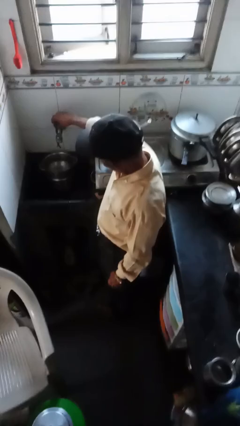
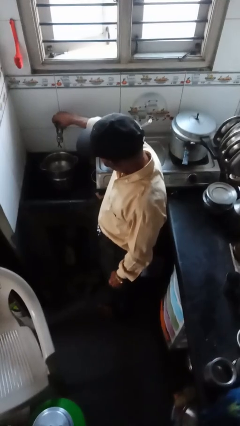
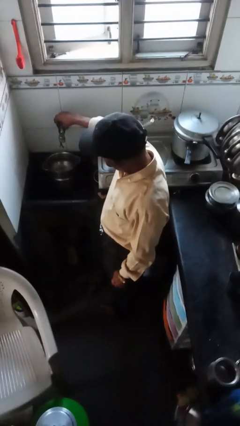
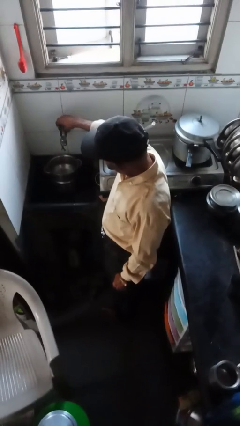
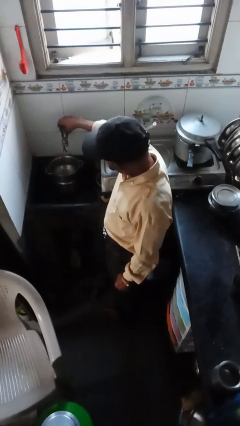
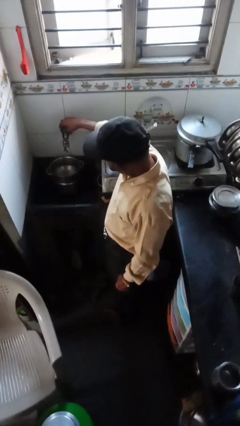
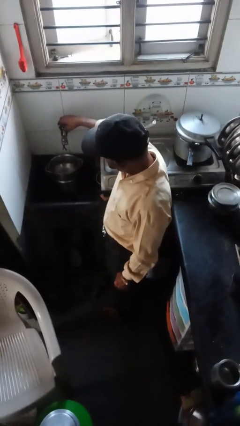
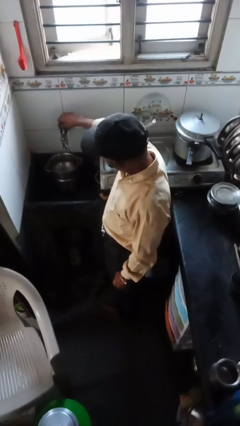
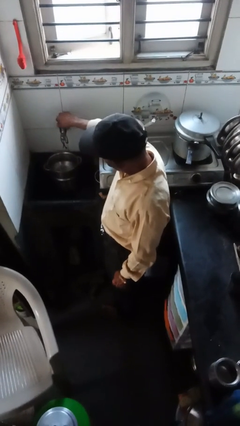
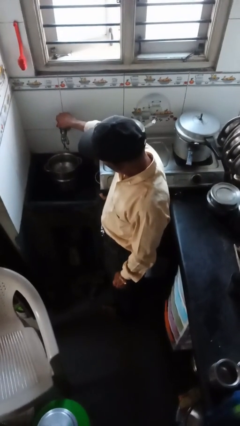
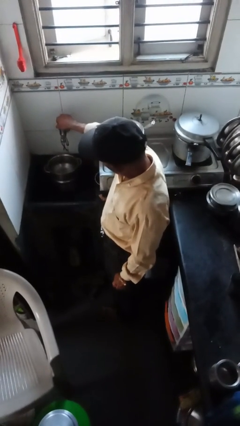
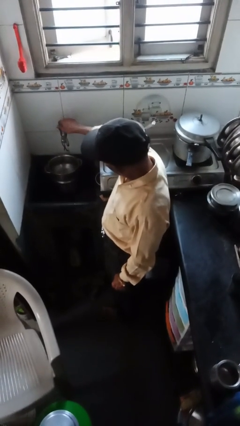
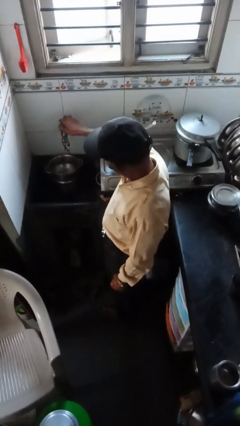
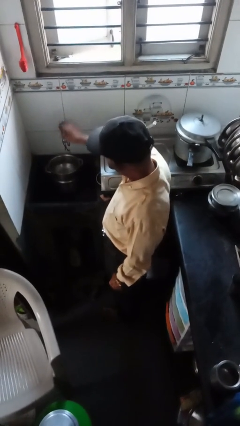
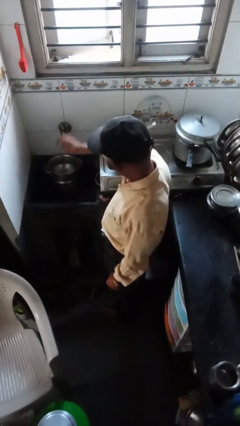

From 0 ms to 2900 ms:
person turns off faucet

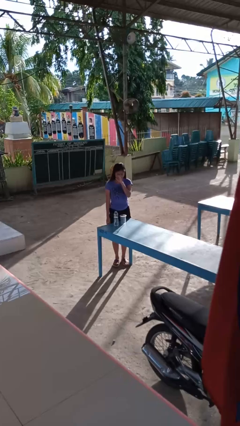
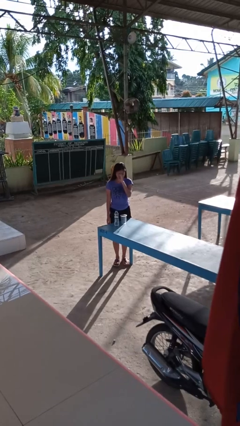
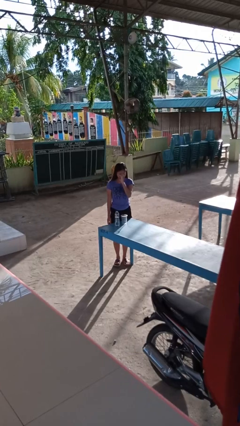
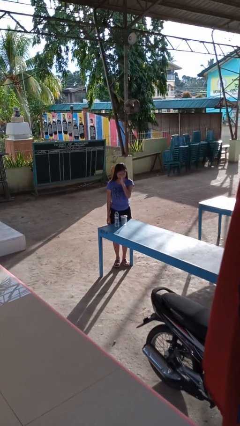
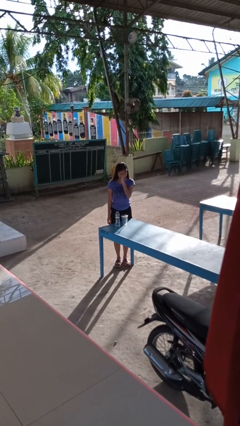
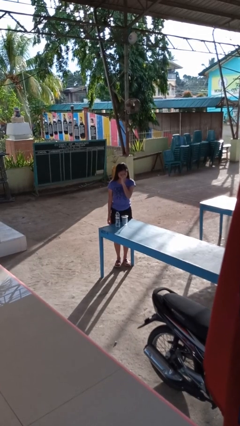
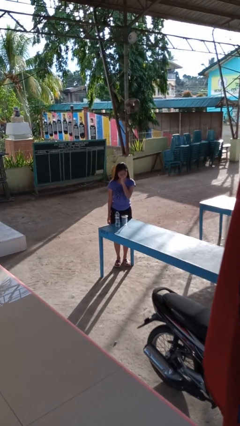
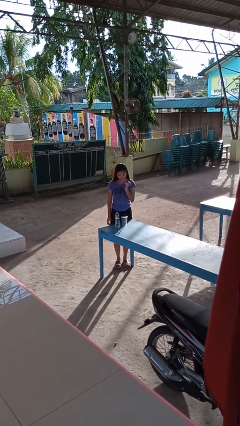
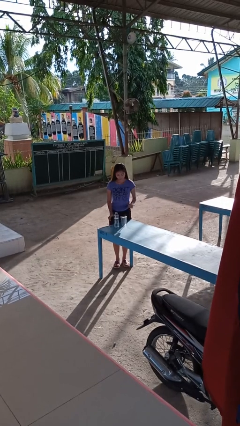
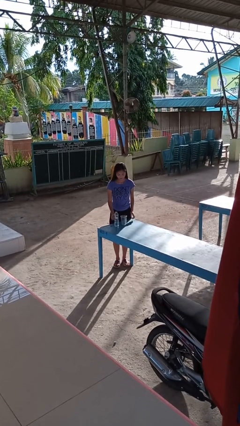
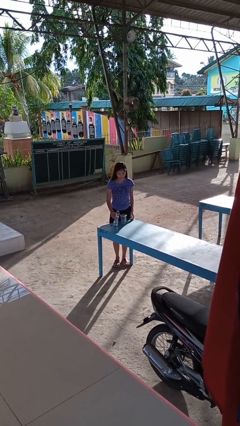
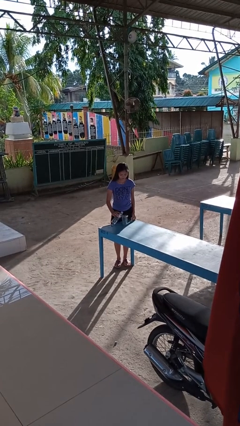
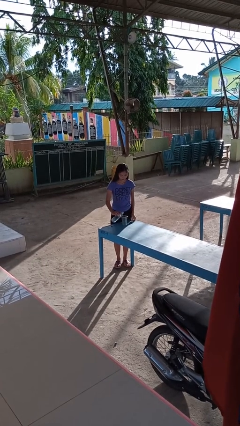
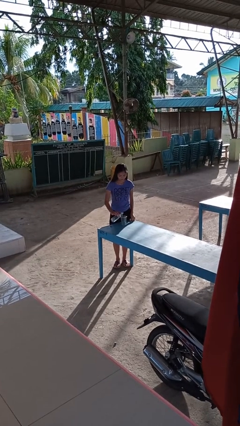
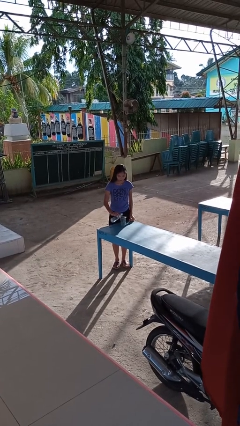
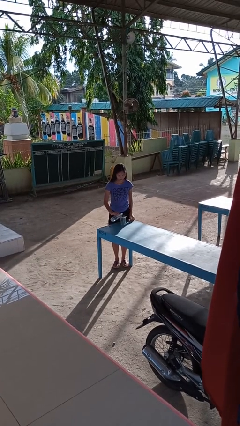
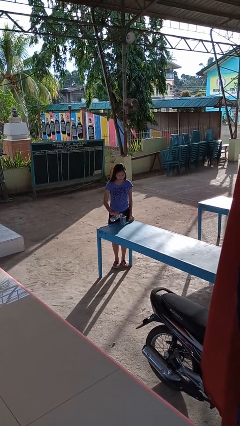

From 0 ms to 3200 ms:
person pours liquid into cup

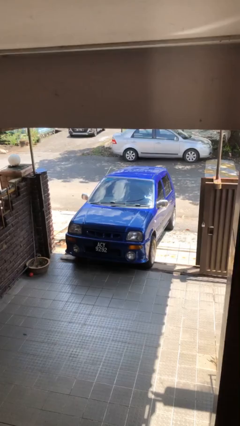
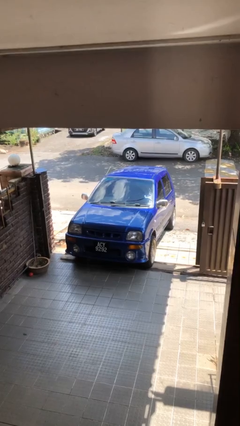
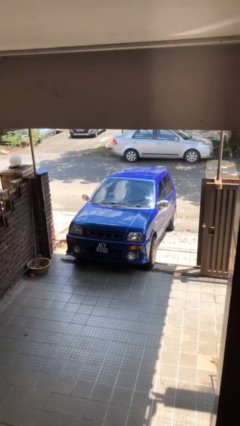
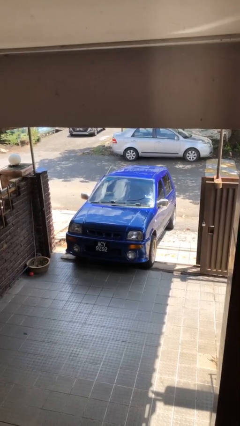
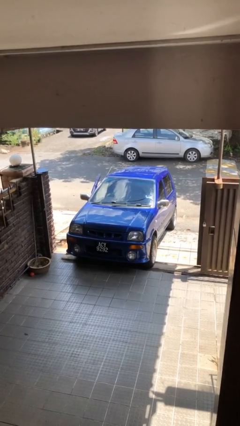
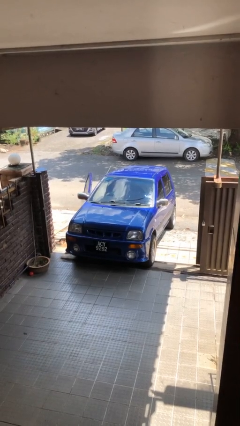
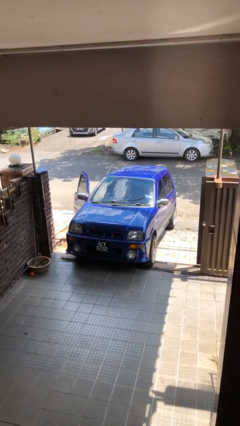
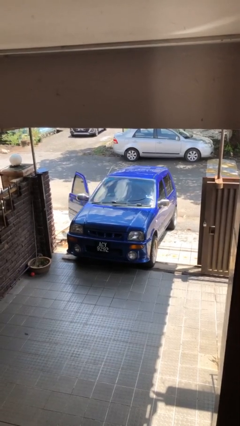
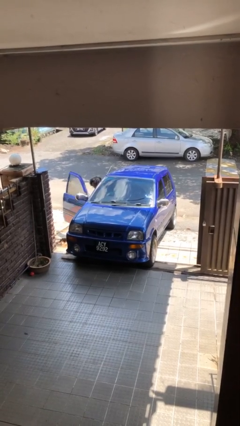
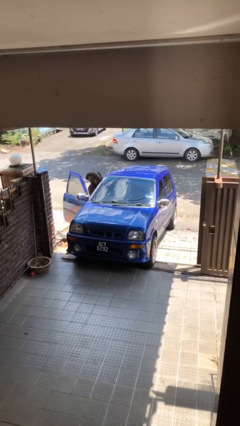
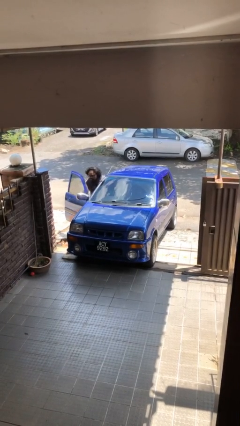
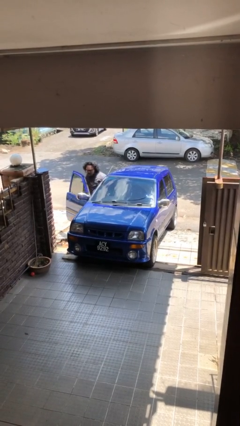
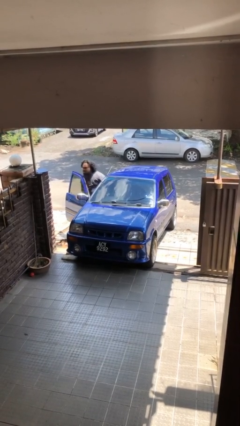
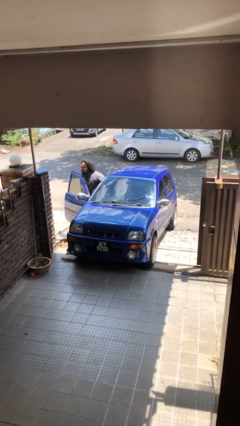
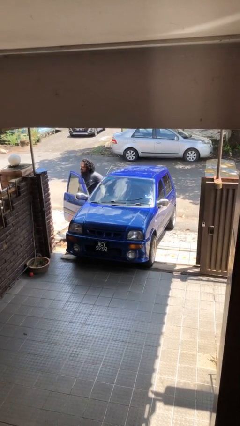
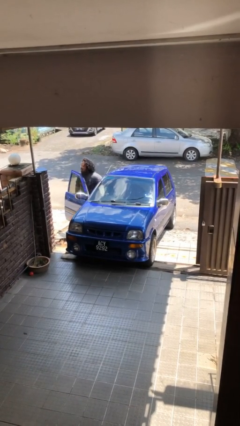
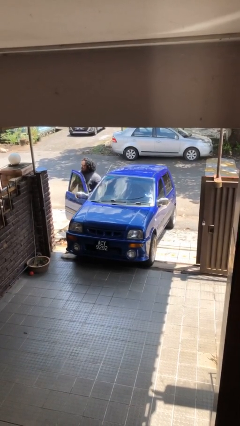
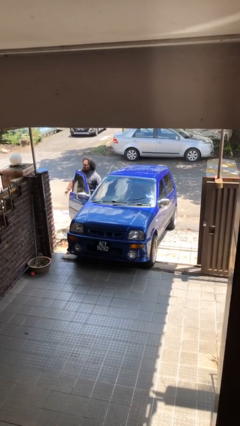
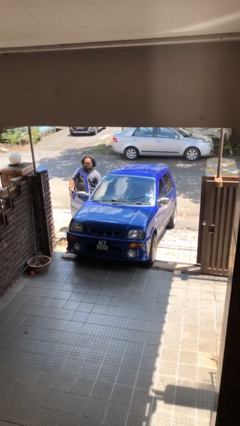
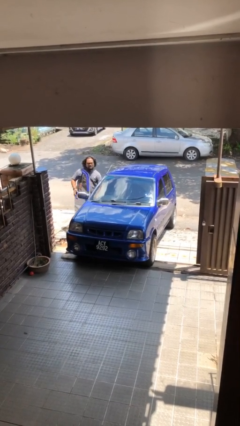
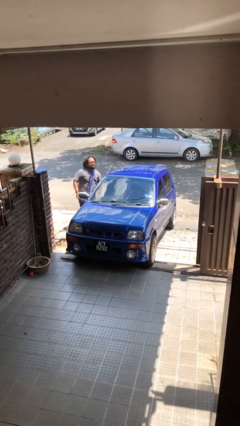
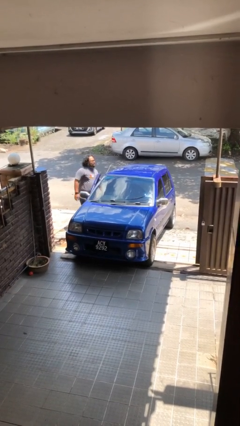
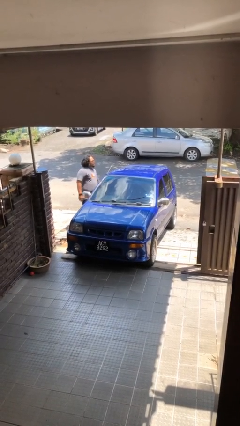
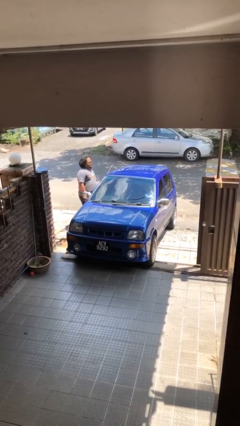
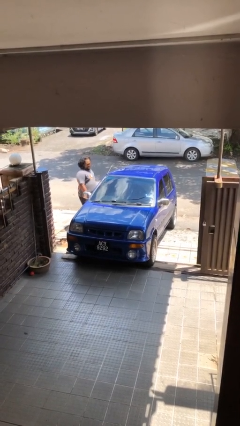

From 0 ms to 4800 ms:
car drops off person

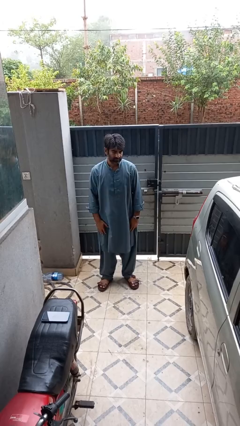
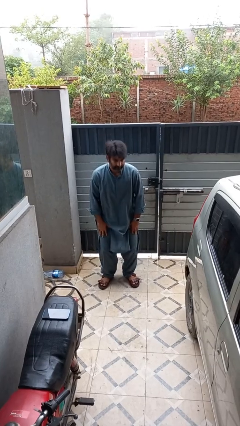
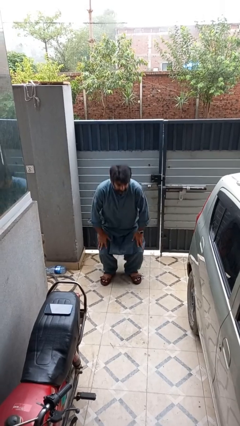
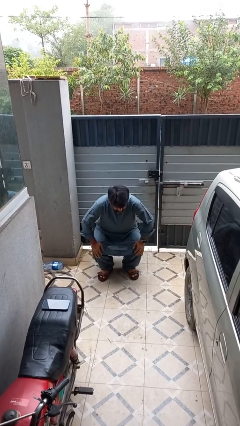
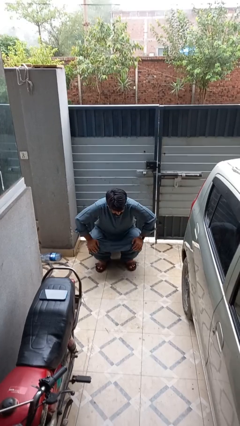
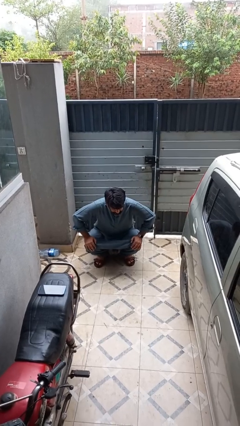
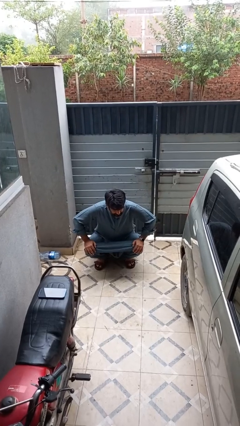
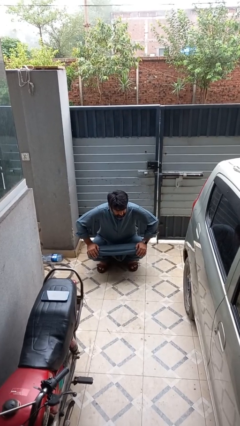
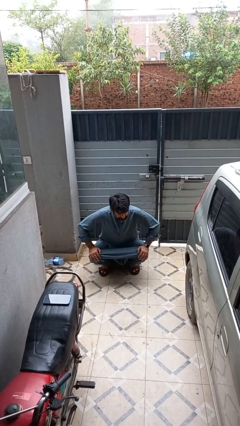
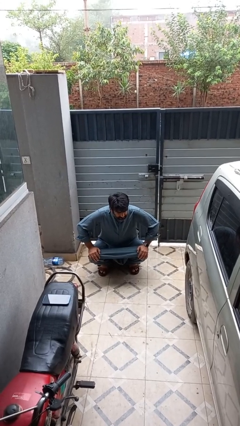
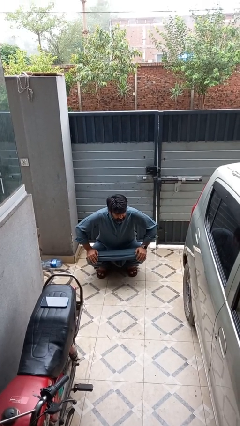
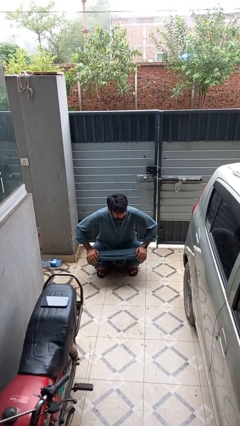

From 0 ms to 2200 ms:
person squats

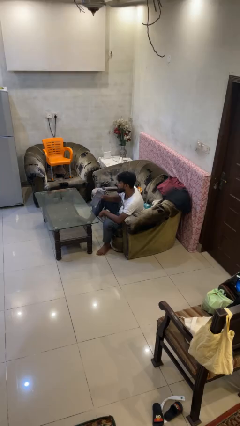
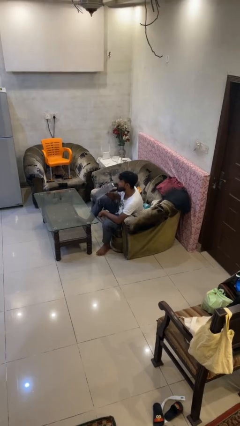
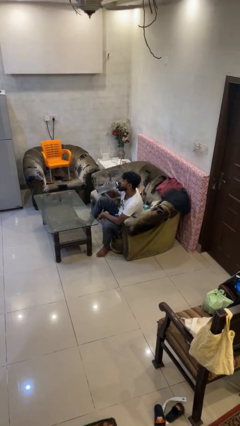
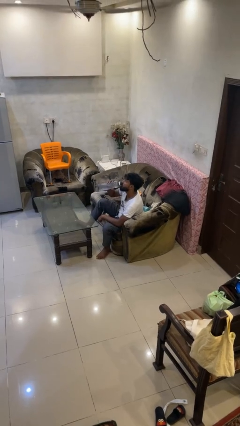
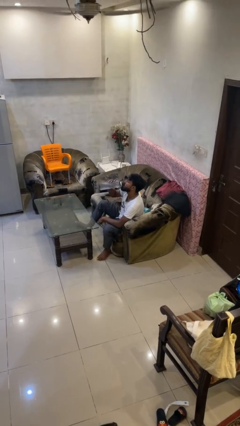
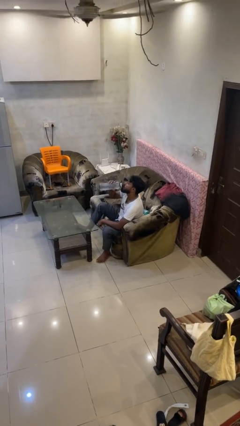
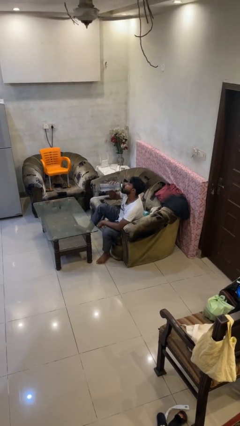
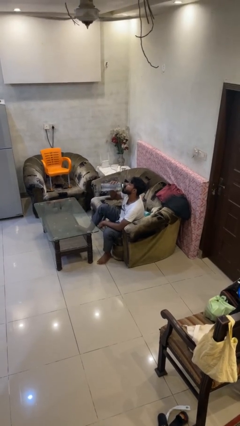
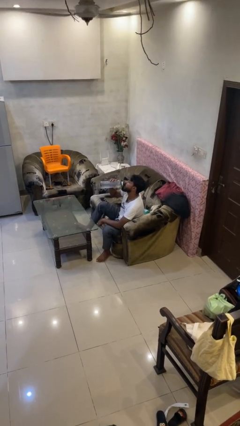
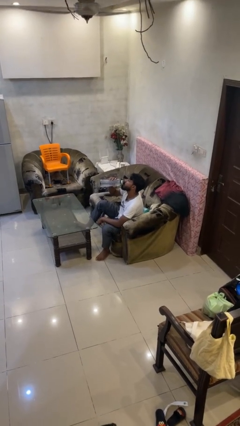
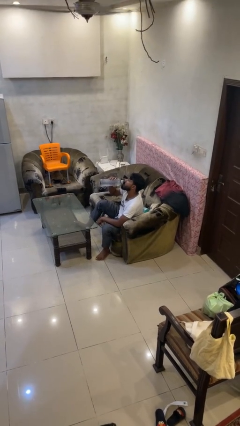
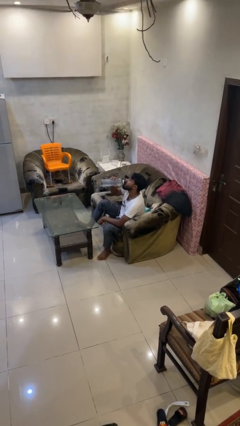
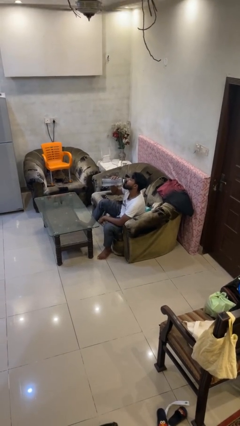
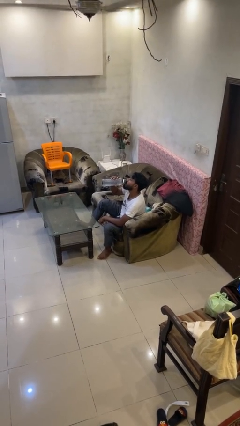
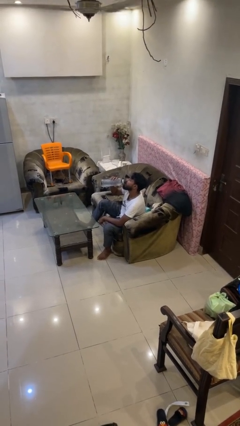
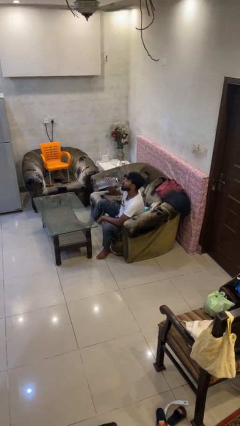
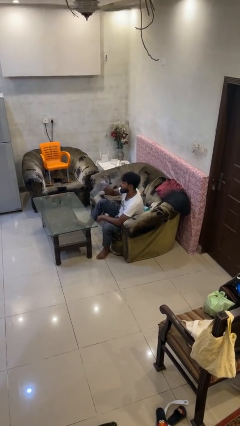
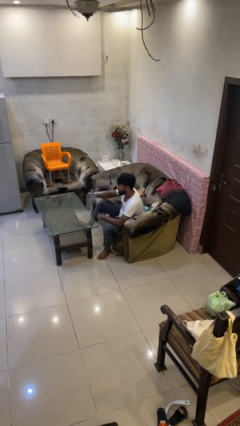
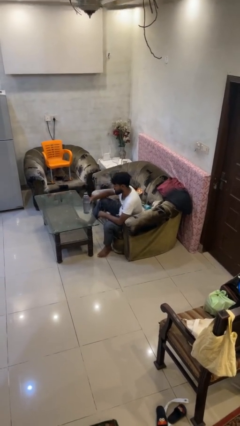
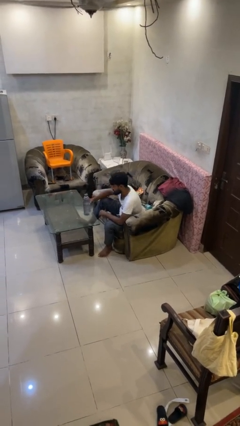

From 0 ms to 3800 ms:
person drinks from bottle

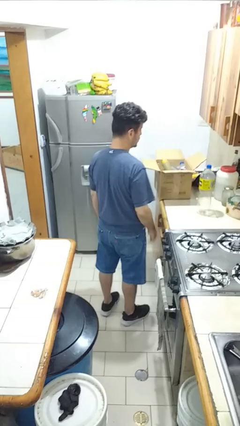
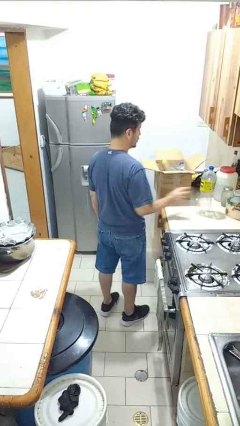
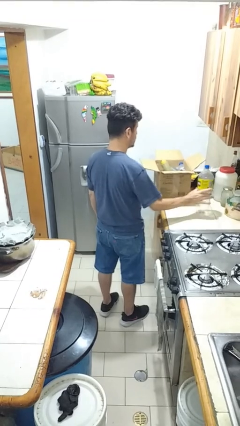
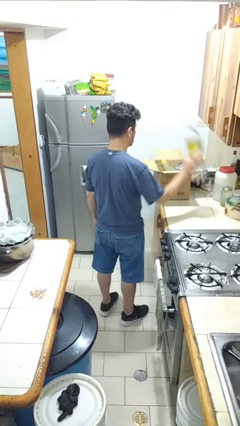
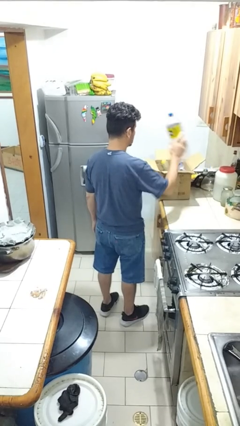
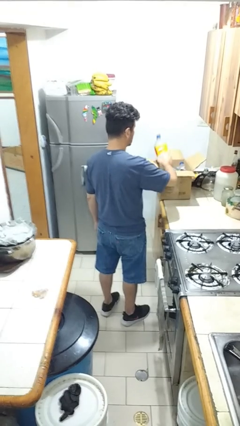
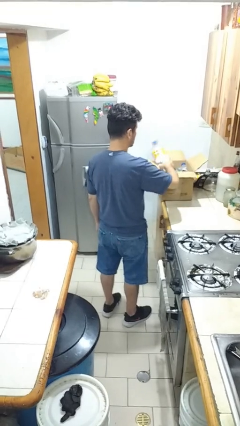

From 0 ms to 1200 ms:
person puts object into box
